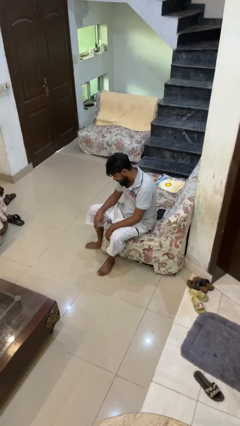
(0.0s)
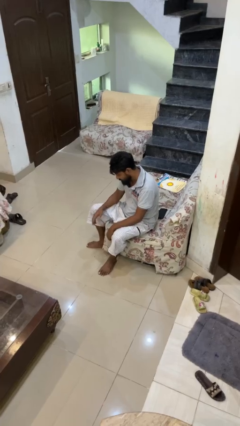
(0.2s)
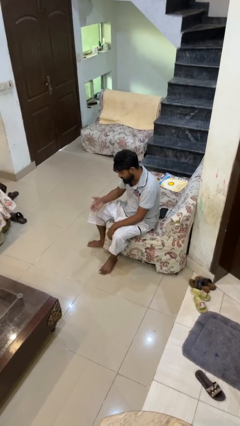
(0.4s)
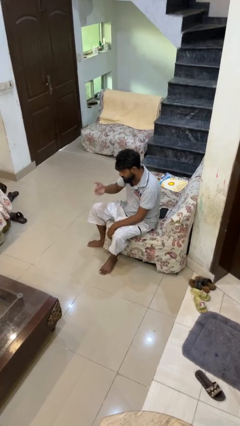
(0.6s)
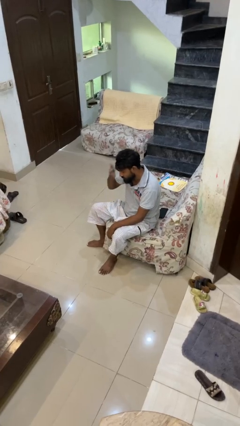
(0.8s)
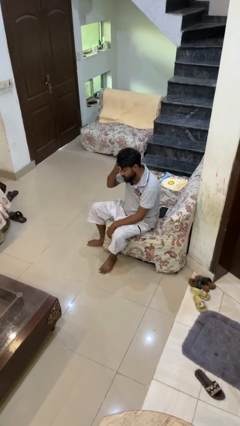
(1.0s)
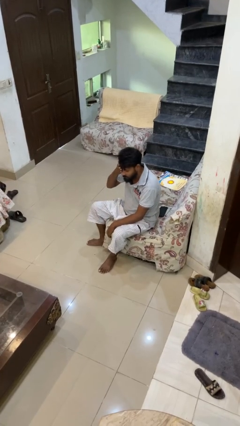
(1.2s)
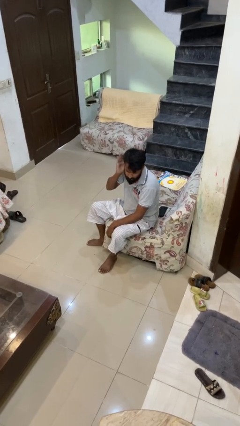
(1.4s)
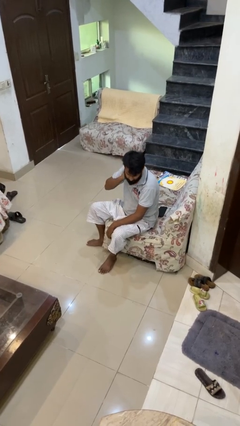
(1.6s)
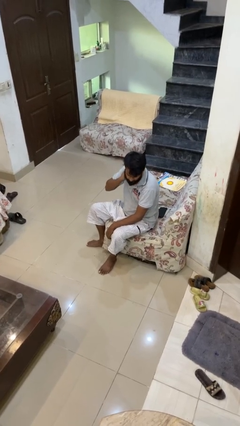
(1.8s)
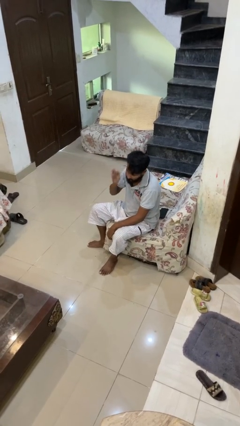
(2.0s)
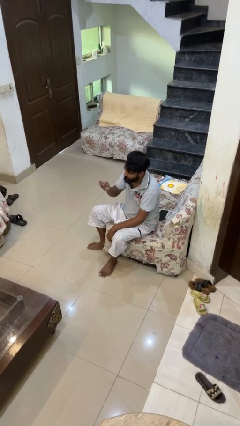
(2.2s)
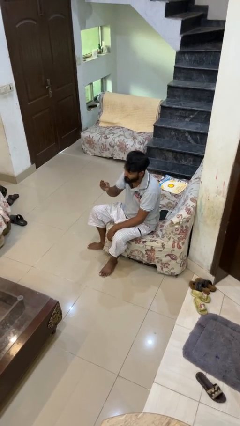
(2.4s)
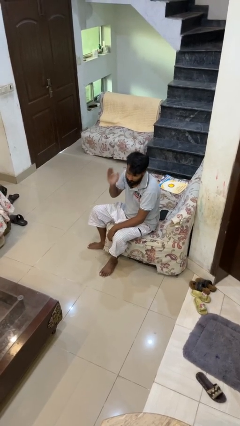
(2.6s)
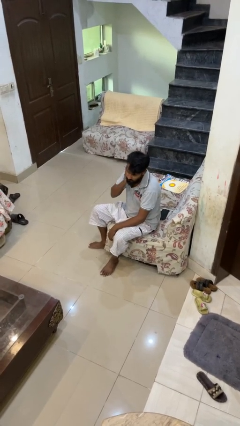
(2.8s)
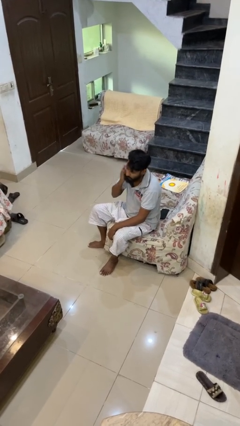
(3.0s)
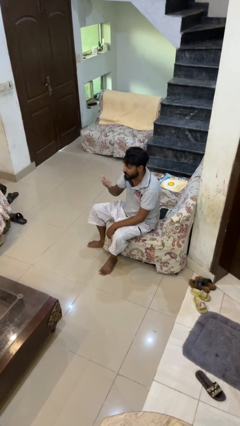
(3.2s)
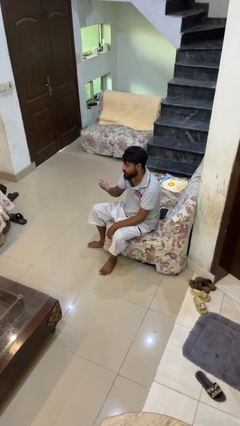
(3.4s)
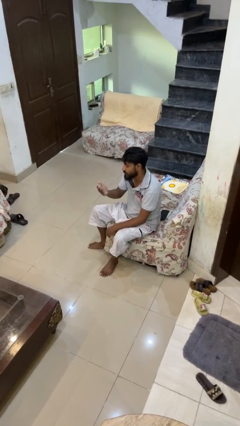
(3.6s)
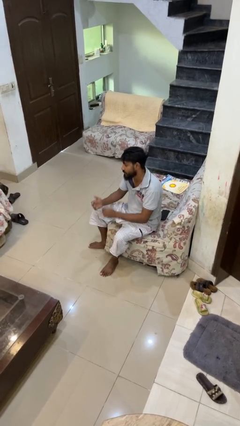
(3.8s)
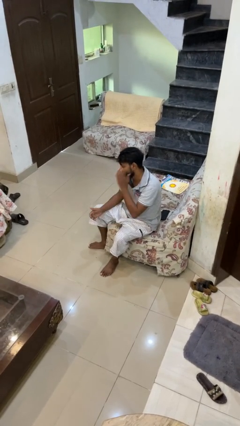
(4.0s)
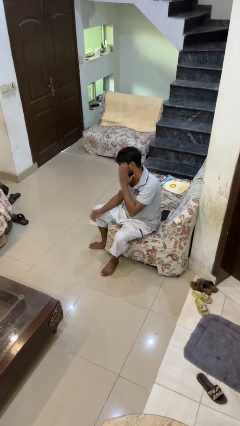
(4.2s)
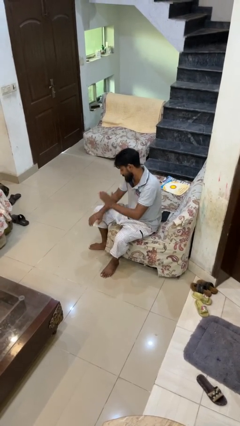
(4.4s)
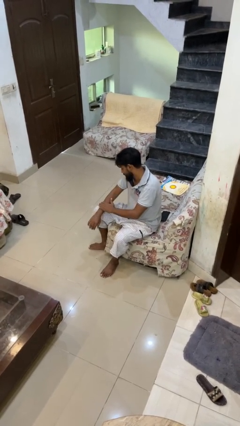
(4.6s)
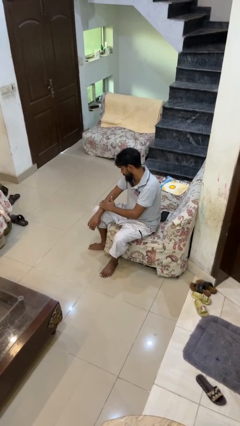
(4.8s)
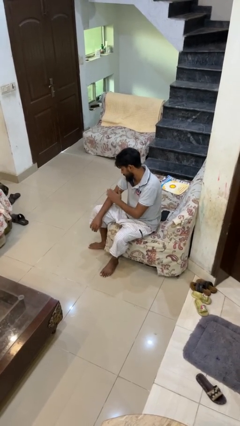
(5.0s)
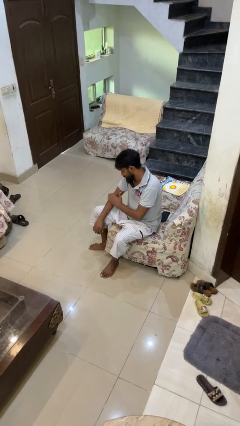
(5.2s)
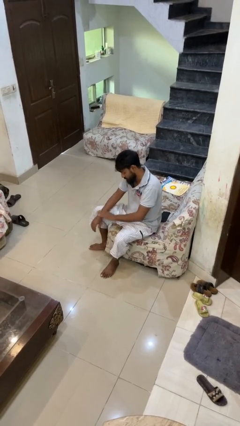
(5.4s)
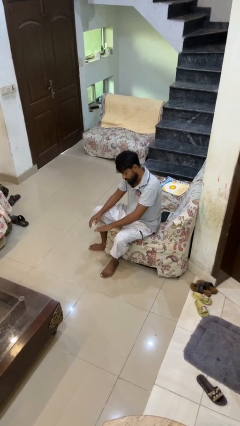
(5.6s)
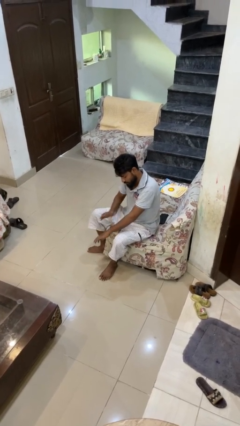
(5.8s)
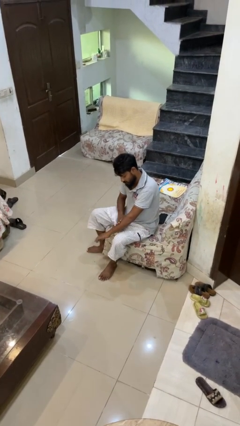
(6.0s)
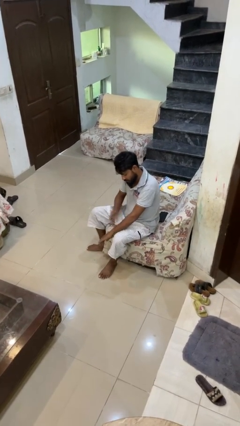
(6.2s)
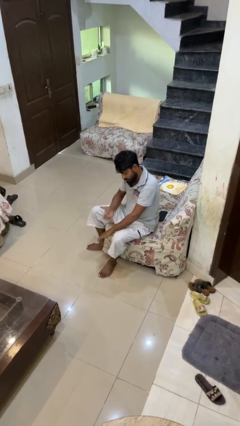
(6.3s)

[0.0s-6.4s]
person swats bug

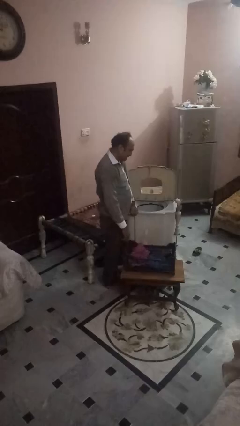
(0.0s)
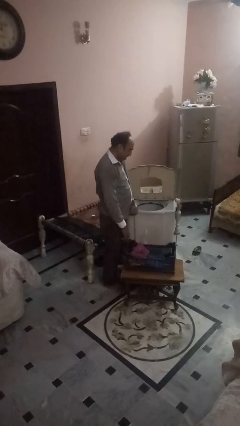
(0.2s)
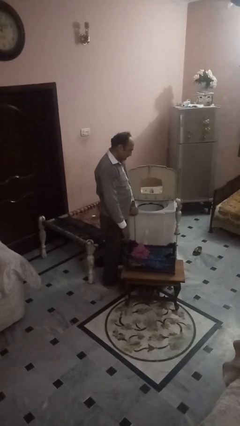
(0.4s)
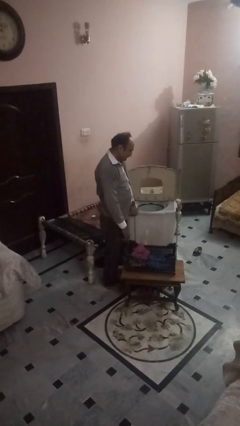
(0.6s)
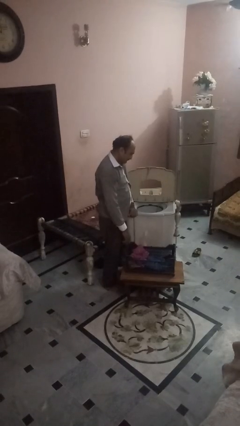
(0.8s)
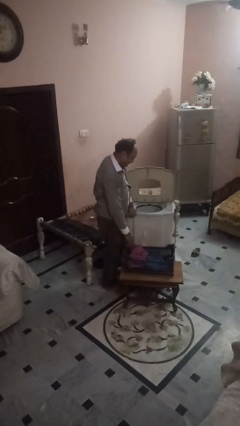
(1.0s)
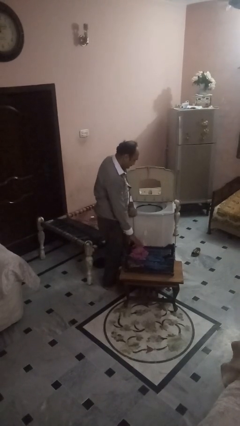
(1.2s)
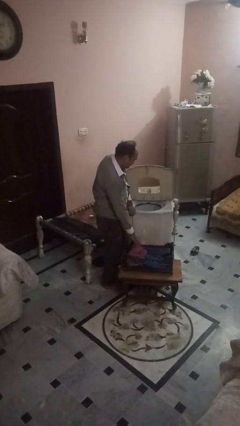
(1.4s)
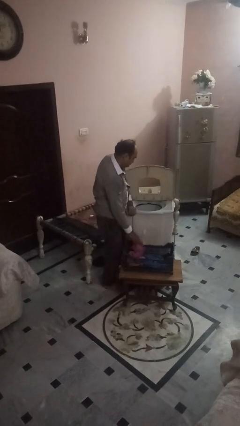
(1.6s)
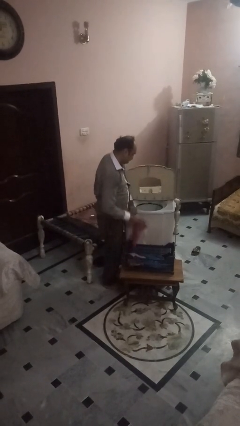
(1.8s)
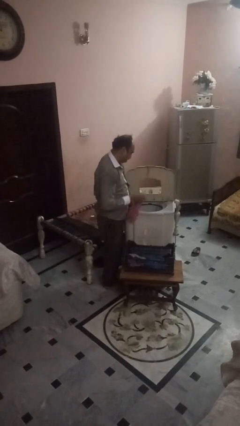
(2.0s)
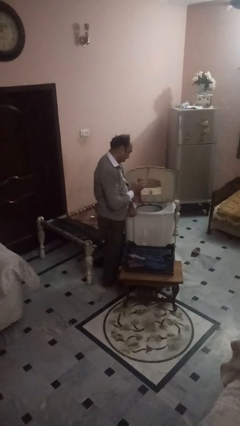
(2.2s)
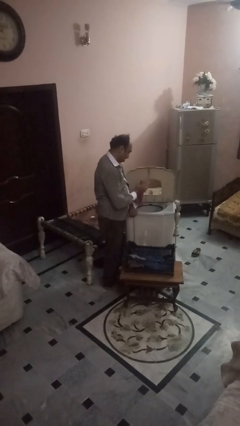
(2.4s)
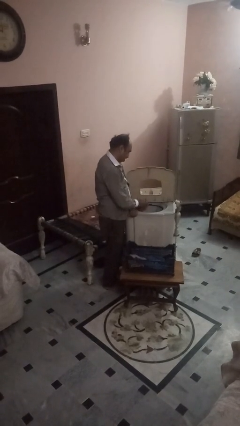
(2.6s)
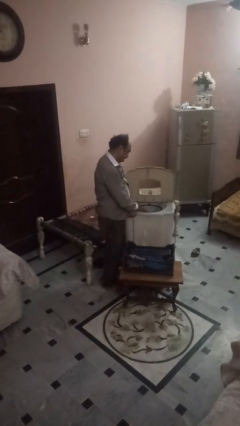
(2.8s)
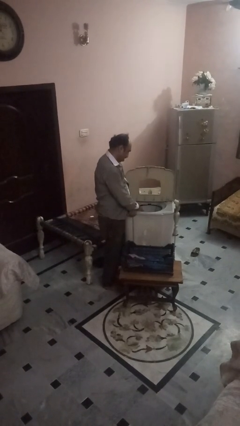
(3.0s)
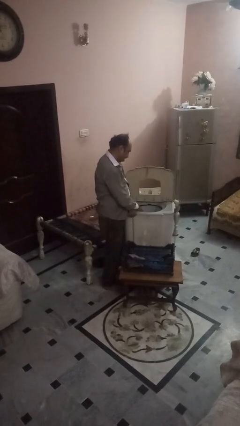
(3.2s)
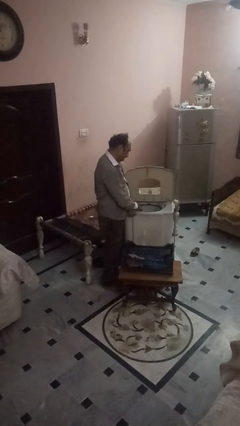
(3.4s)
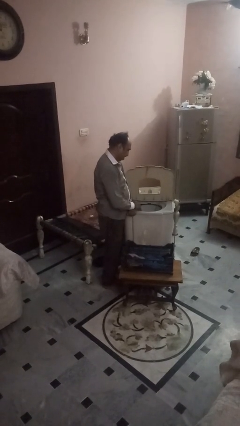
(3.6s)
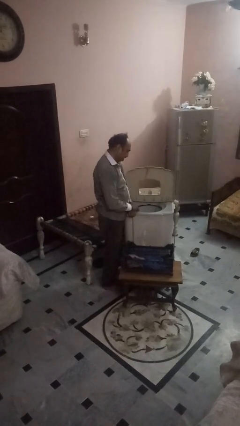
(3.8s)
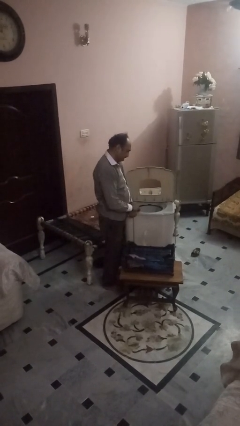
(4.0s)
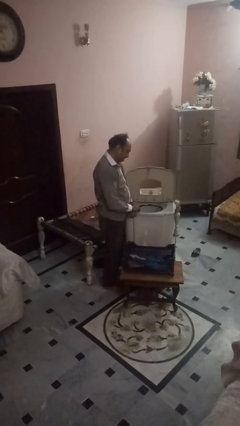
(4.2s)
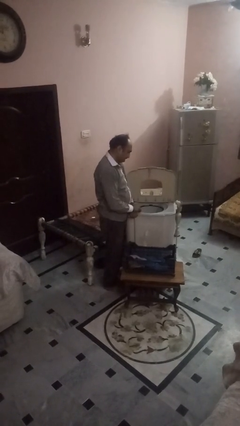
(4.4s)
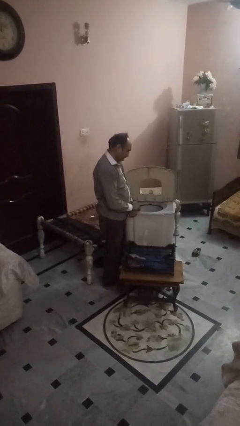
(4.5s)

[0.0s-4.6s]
person loads dryer

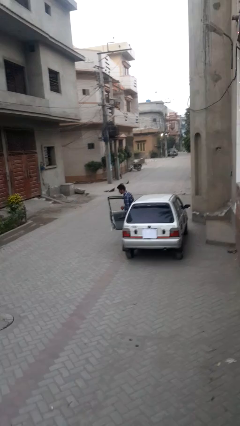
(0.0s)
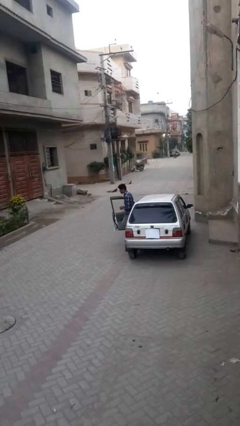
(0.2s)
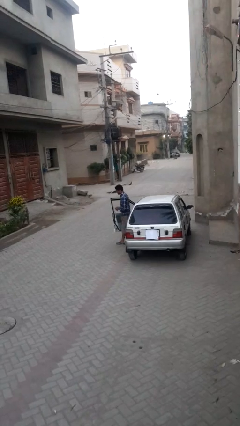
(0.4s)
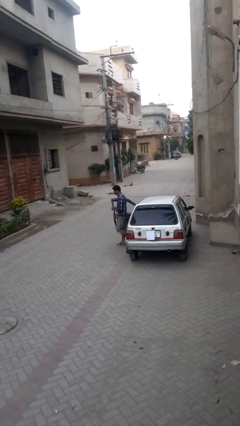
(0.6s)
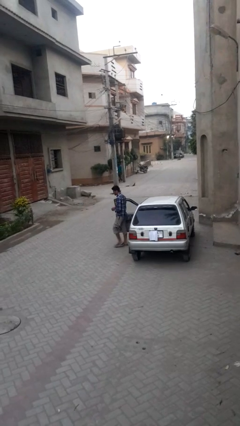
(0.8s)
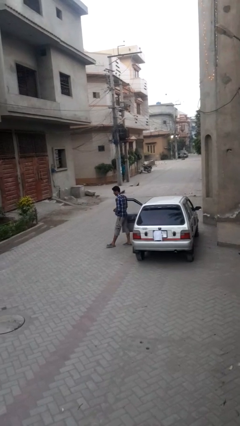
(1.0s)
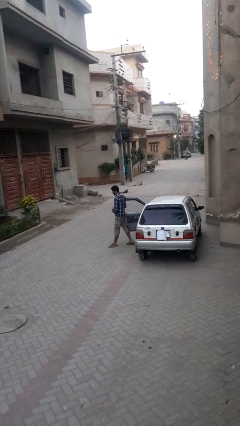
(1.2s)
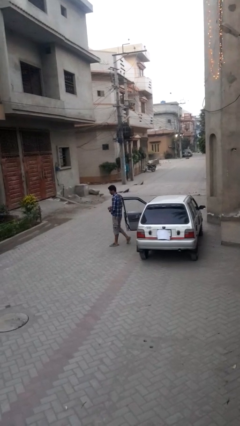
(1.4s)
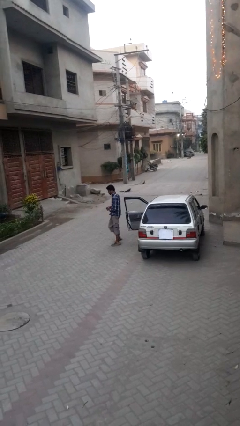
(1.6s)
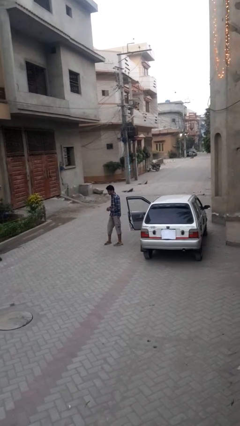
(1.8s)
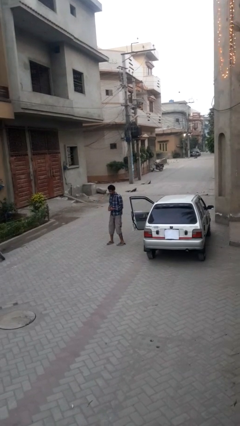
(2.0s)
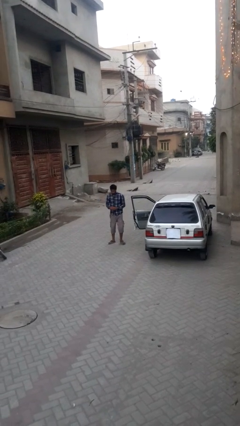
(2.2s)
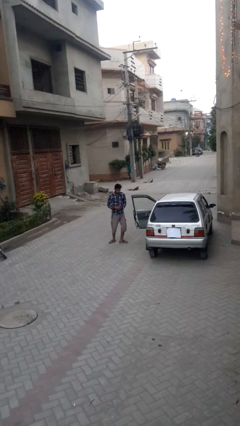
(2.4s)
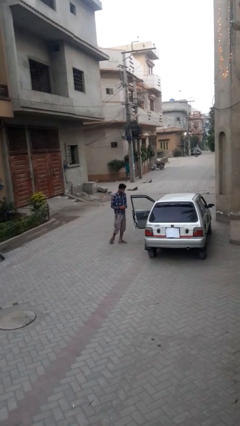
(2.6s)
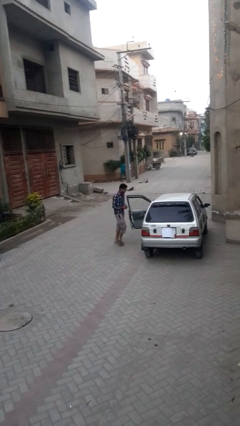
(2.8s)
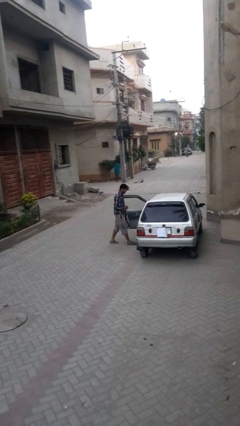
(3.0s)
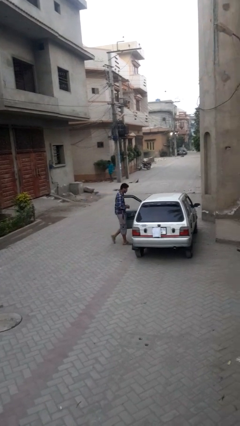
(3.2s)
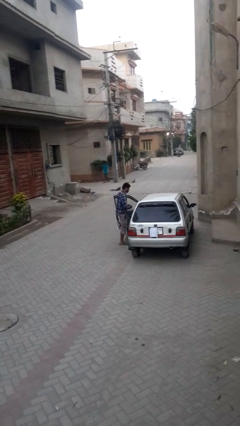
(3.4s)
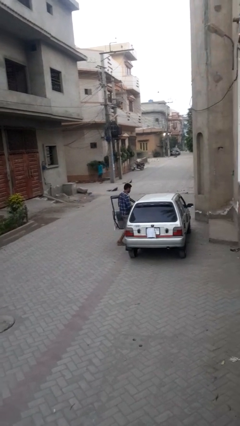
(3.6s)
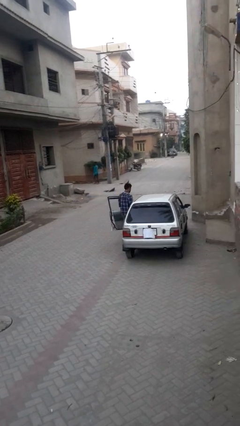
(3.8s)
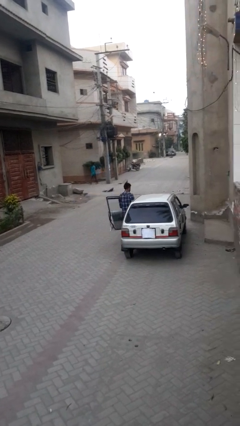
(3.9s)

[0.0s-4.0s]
person exits car

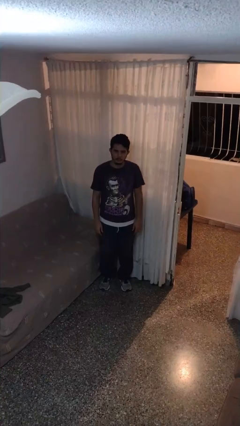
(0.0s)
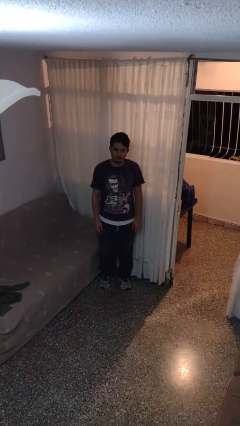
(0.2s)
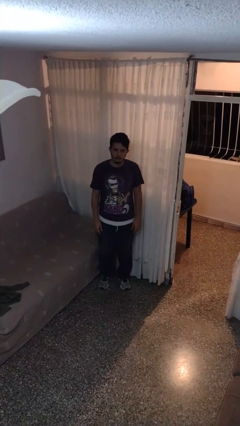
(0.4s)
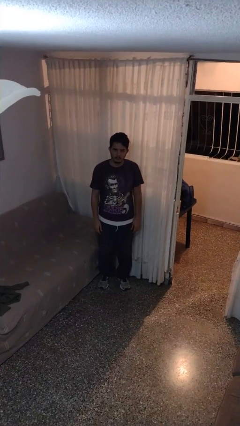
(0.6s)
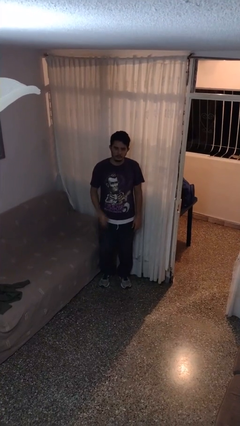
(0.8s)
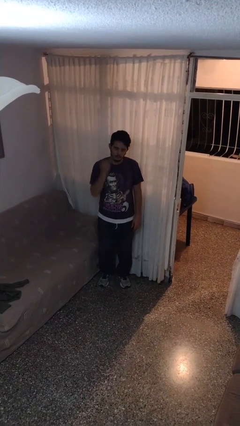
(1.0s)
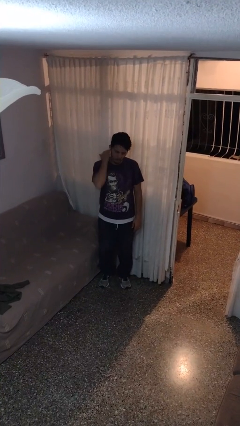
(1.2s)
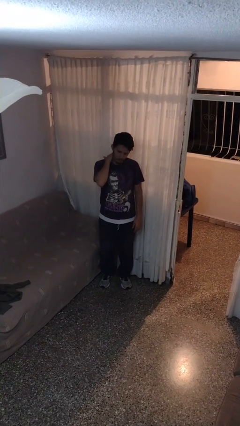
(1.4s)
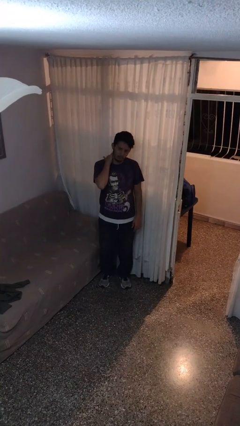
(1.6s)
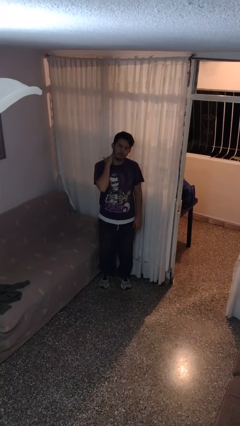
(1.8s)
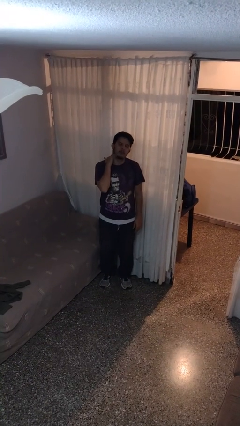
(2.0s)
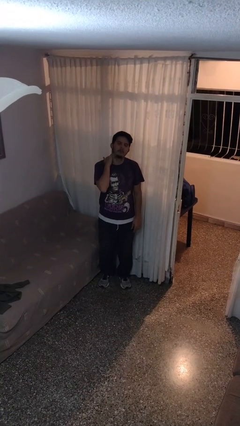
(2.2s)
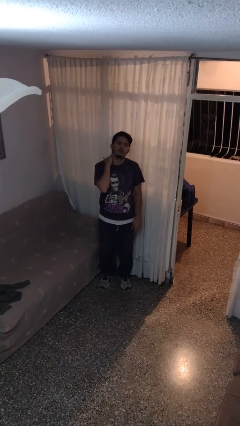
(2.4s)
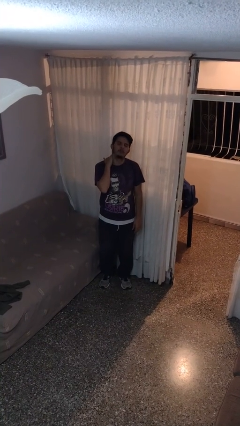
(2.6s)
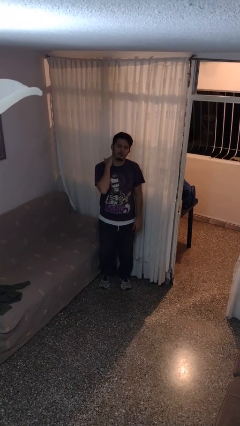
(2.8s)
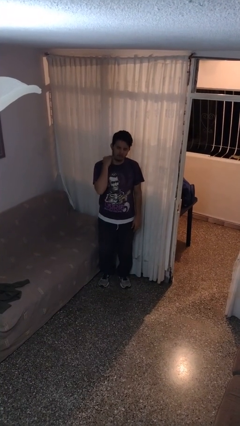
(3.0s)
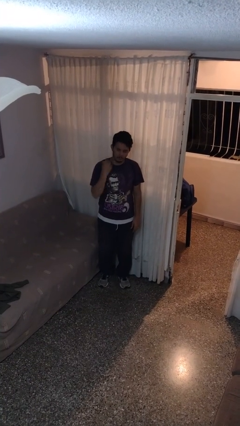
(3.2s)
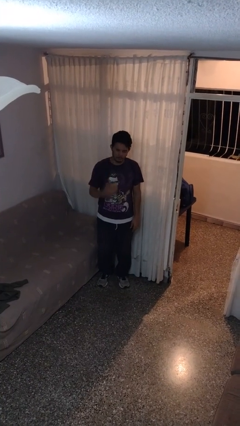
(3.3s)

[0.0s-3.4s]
person rubs neck
